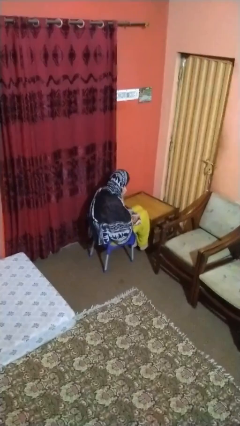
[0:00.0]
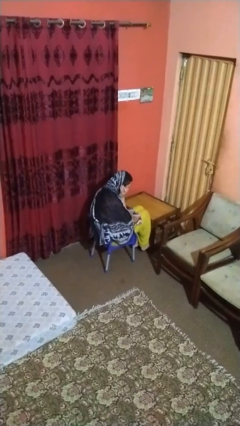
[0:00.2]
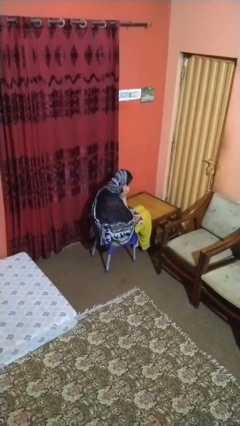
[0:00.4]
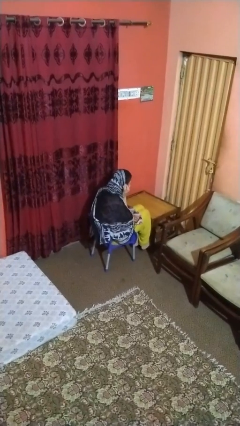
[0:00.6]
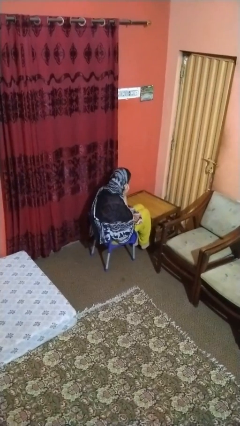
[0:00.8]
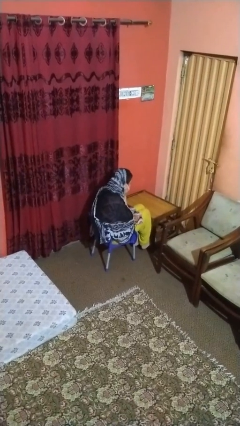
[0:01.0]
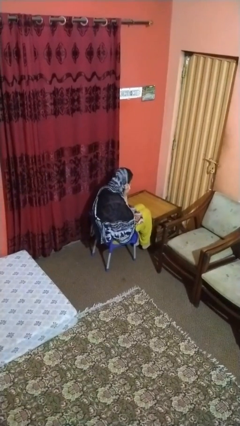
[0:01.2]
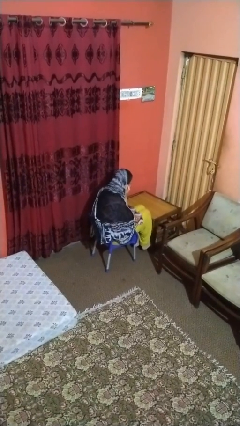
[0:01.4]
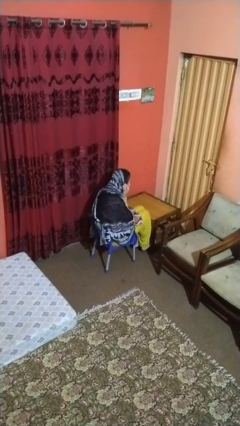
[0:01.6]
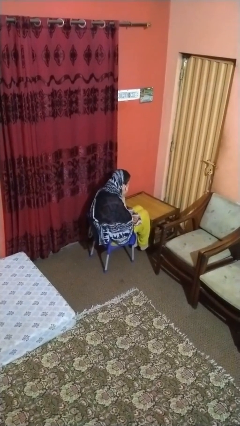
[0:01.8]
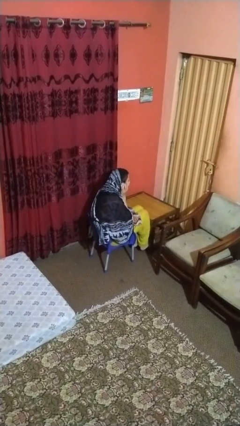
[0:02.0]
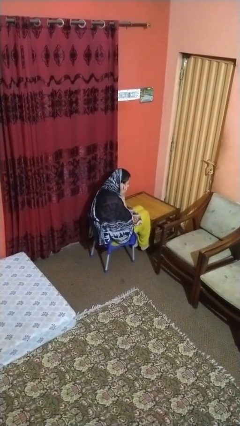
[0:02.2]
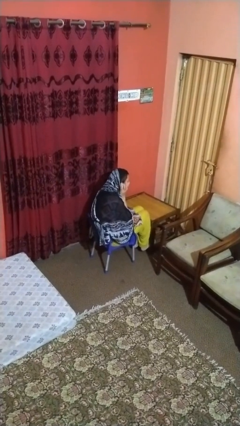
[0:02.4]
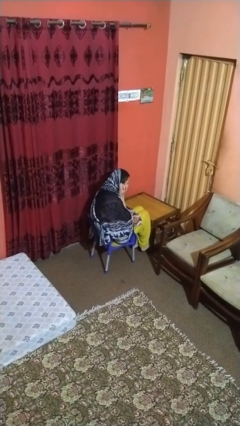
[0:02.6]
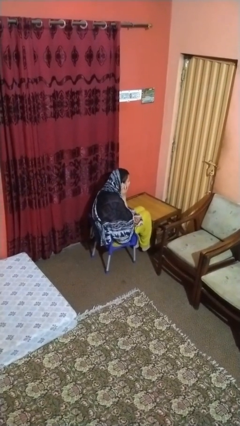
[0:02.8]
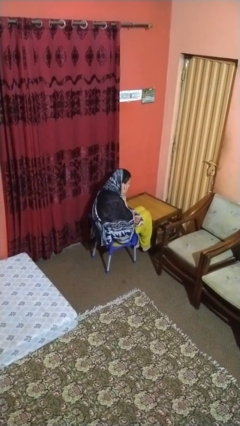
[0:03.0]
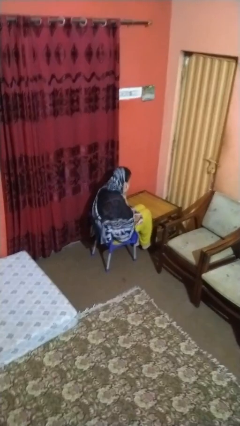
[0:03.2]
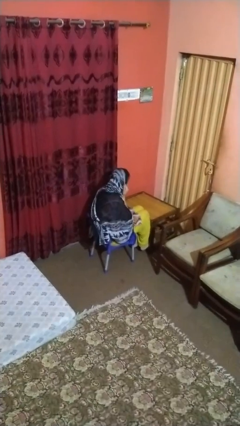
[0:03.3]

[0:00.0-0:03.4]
person puts fingers in ear

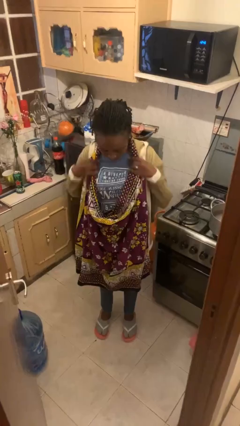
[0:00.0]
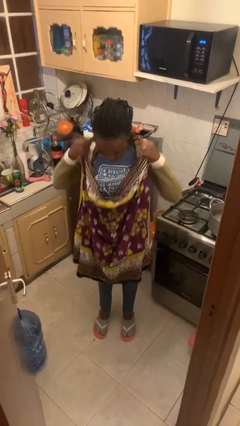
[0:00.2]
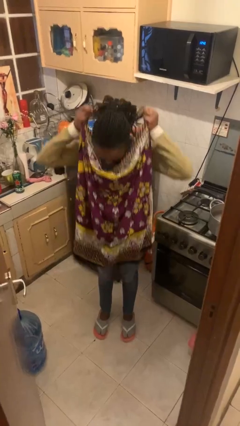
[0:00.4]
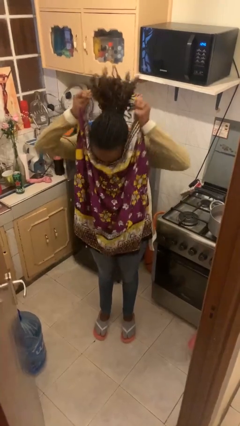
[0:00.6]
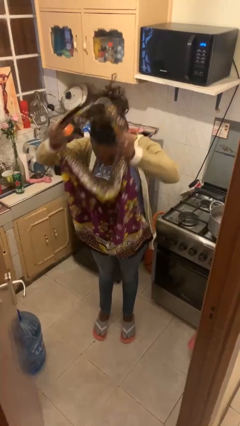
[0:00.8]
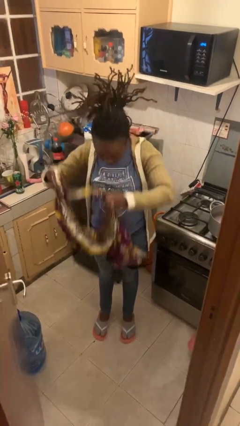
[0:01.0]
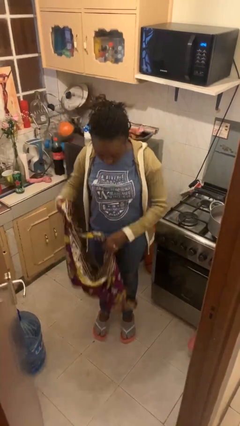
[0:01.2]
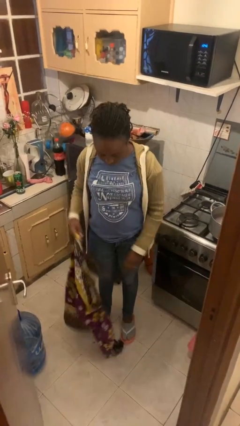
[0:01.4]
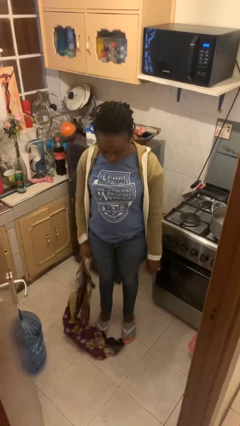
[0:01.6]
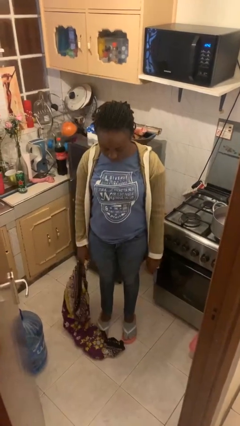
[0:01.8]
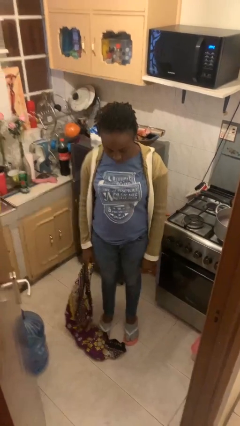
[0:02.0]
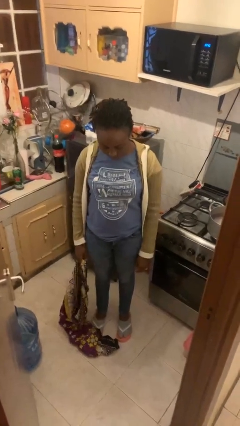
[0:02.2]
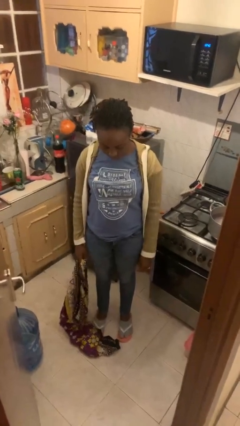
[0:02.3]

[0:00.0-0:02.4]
person takes off apron

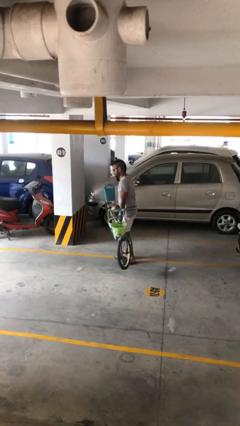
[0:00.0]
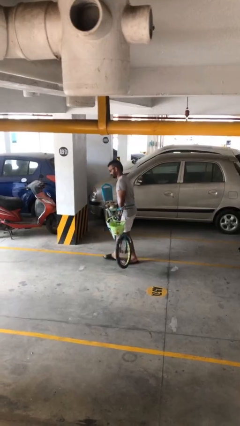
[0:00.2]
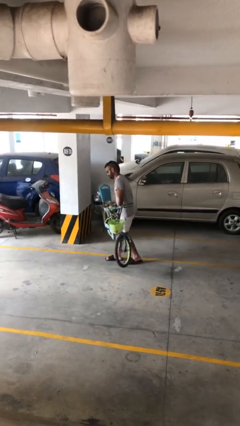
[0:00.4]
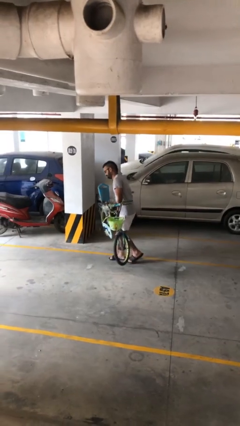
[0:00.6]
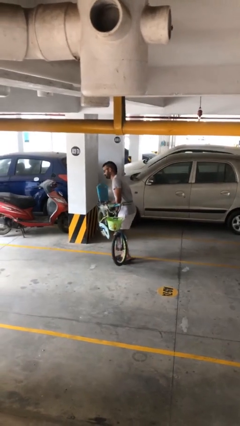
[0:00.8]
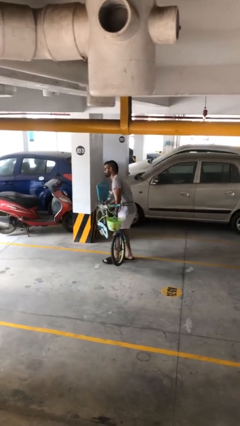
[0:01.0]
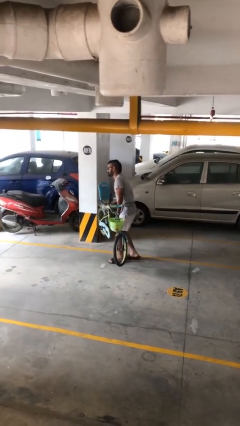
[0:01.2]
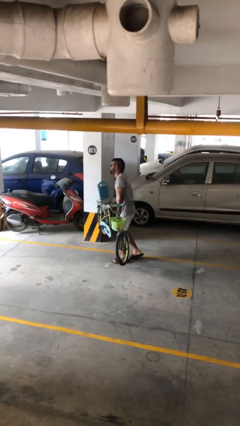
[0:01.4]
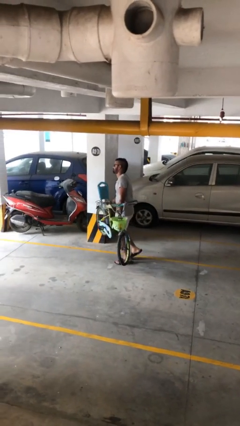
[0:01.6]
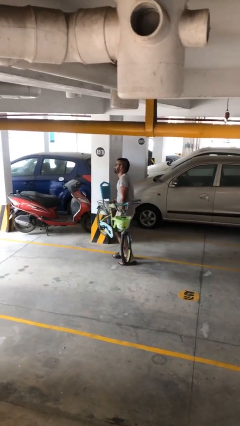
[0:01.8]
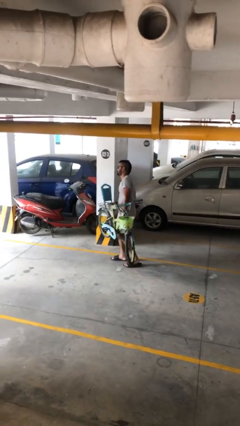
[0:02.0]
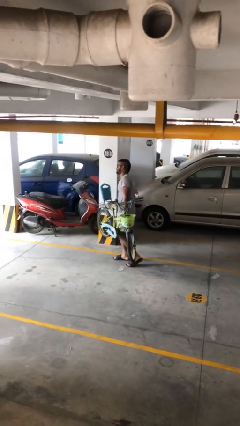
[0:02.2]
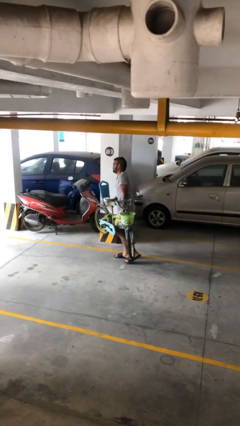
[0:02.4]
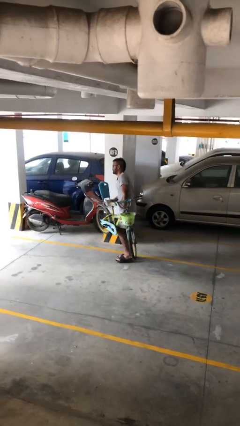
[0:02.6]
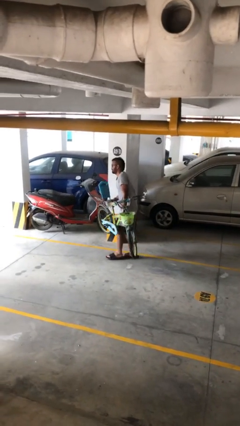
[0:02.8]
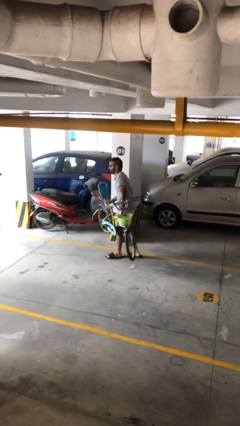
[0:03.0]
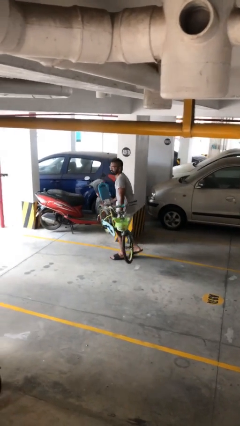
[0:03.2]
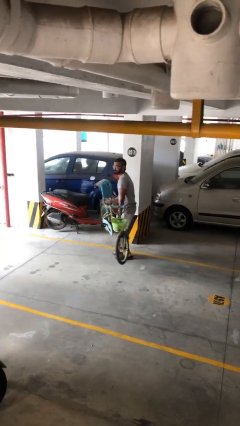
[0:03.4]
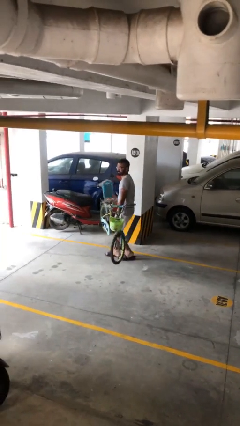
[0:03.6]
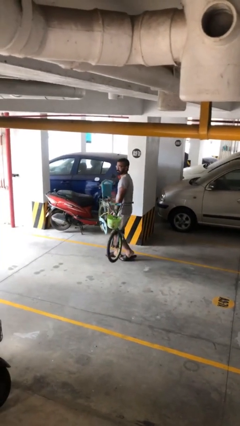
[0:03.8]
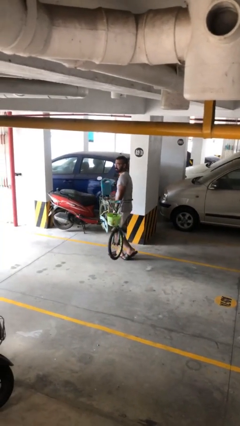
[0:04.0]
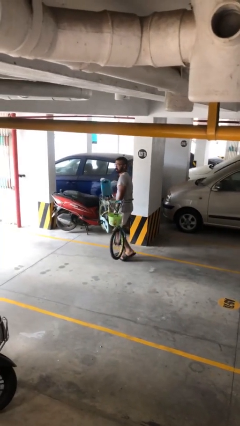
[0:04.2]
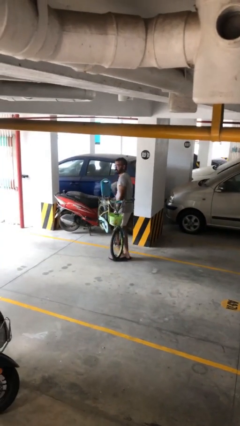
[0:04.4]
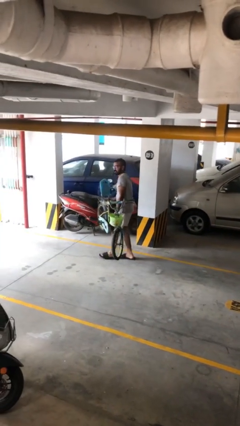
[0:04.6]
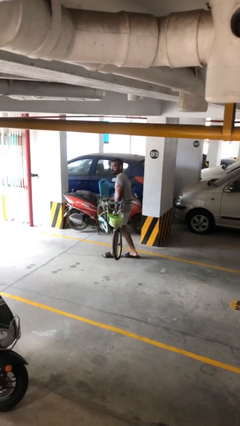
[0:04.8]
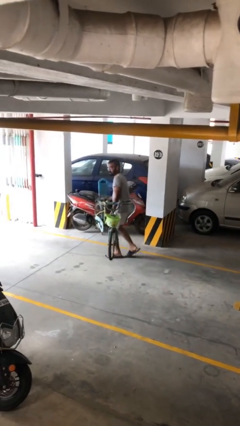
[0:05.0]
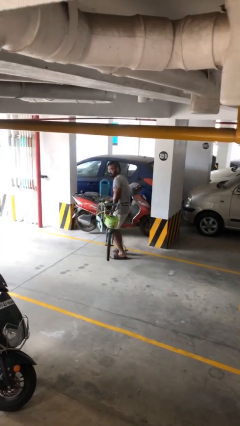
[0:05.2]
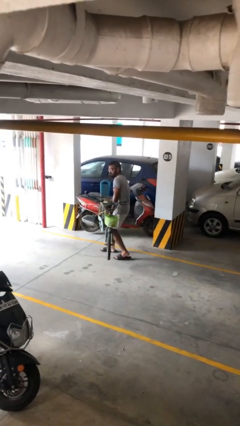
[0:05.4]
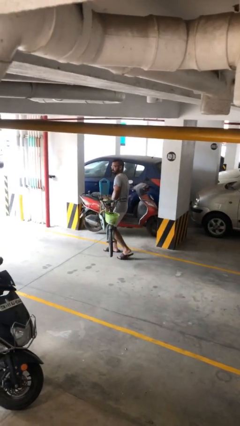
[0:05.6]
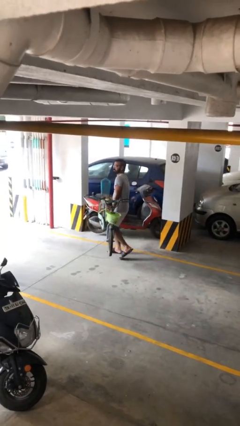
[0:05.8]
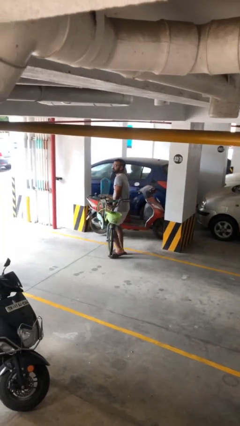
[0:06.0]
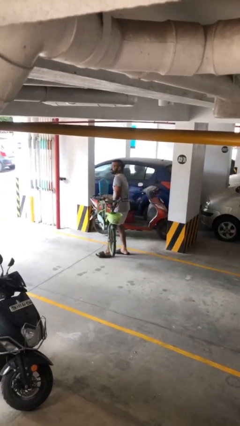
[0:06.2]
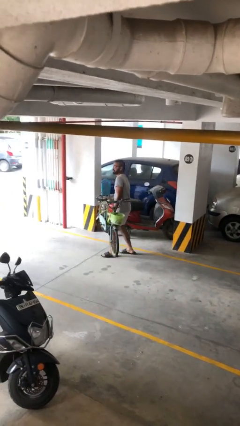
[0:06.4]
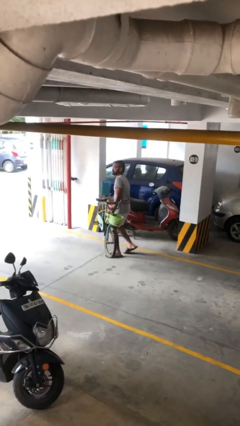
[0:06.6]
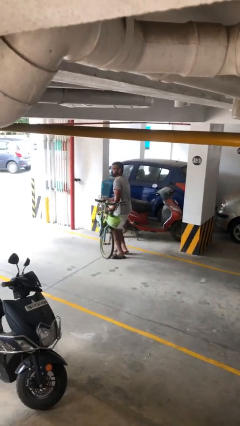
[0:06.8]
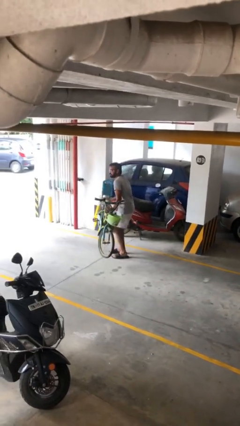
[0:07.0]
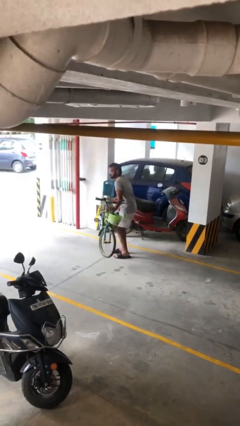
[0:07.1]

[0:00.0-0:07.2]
person carries heavy object

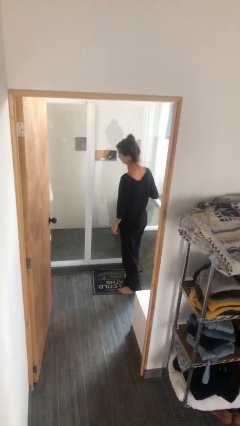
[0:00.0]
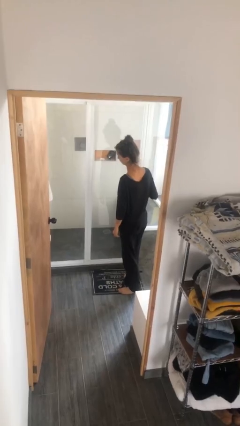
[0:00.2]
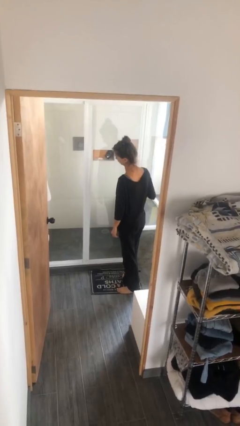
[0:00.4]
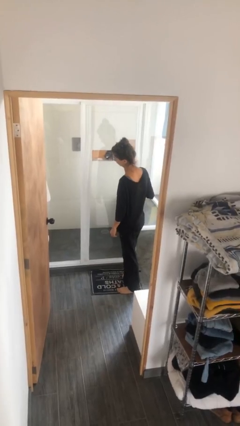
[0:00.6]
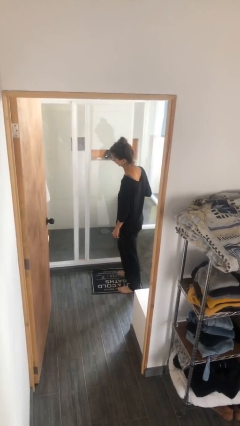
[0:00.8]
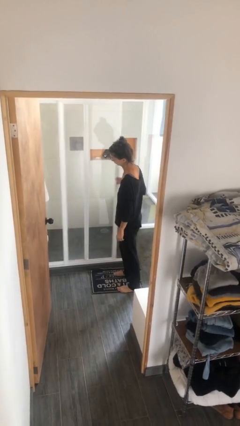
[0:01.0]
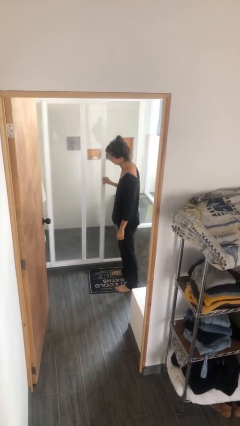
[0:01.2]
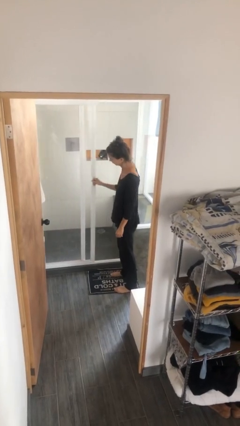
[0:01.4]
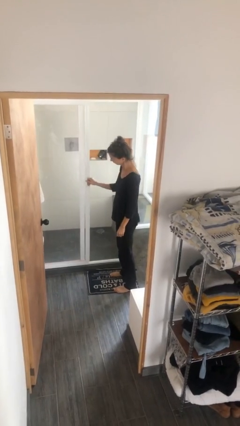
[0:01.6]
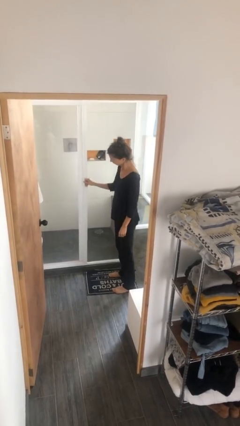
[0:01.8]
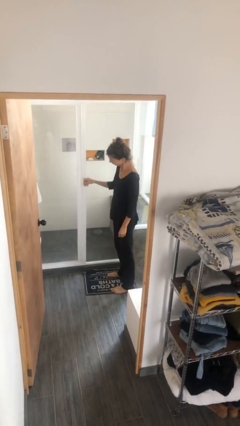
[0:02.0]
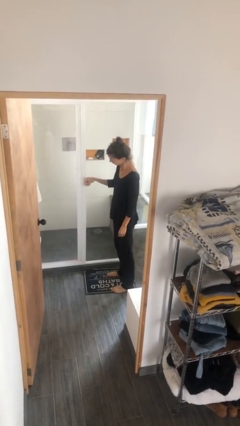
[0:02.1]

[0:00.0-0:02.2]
person opens sliding door

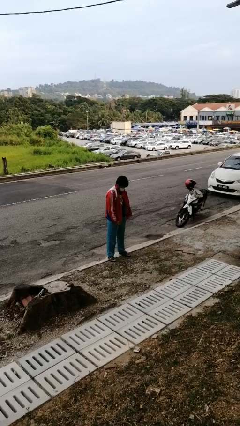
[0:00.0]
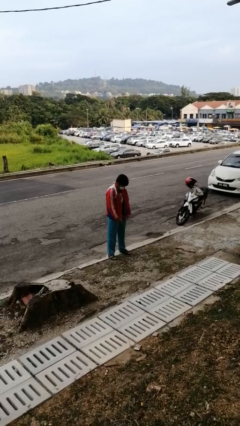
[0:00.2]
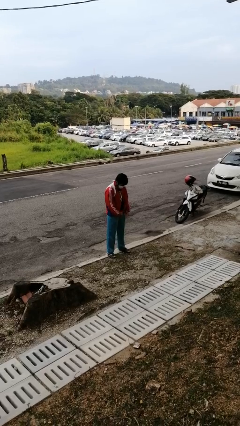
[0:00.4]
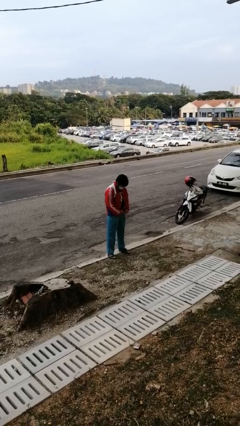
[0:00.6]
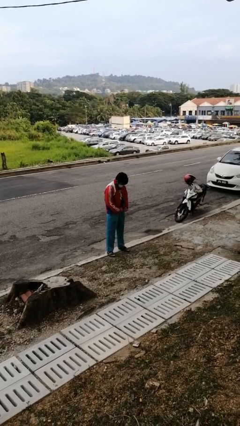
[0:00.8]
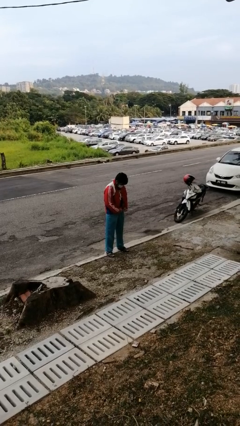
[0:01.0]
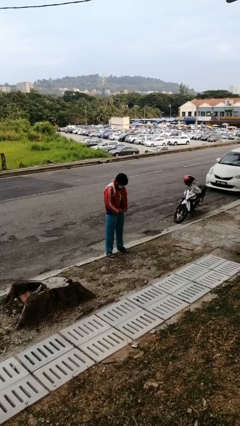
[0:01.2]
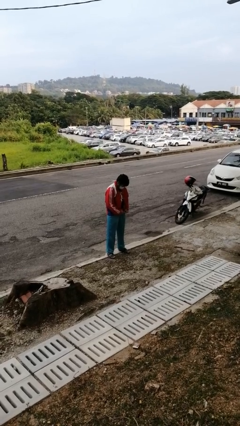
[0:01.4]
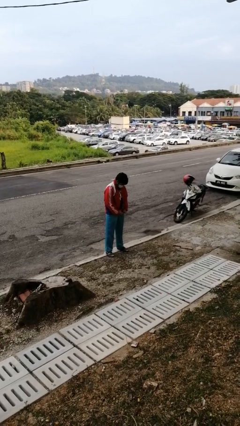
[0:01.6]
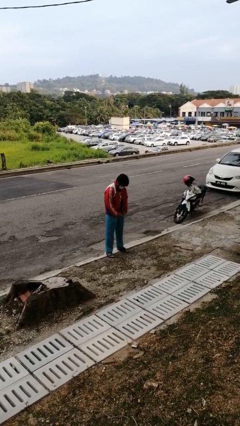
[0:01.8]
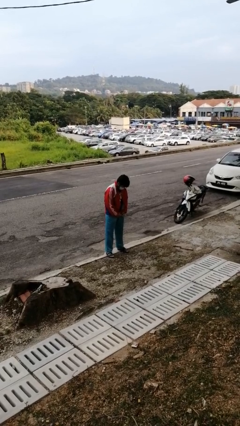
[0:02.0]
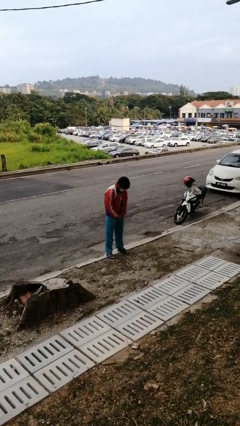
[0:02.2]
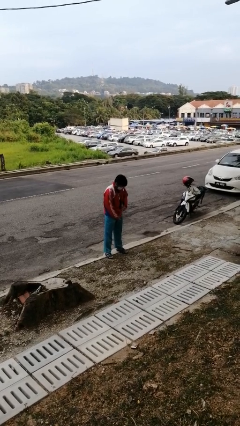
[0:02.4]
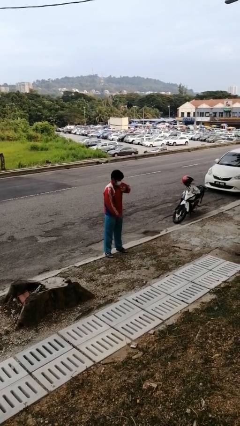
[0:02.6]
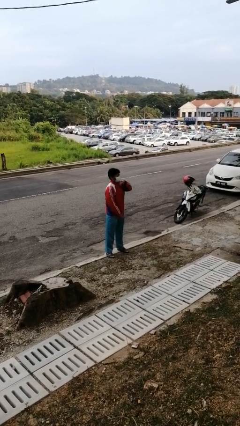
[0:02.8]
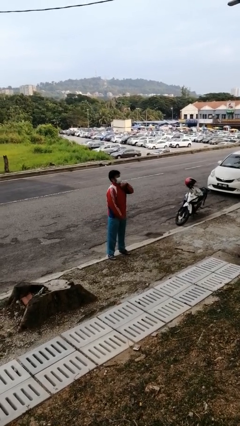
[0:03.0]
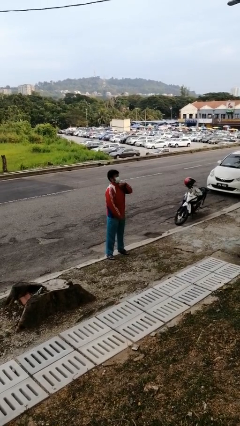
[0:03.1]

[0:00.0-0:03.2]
person zips up jacket
